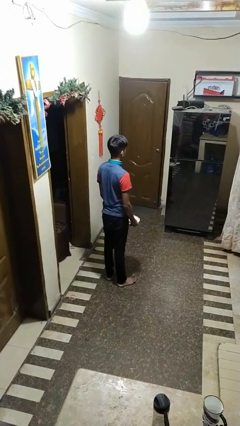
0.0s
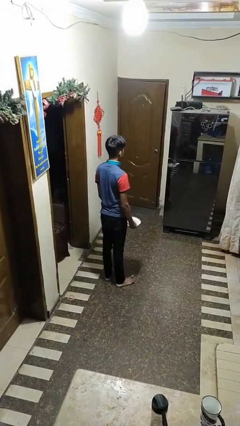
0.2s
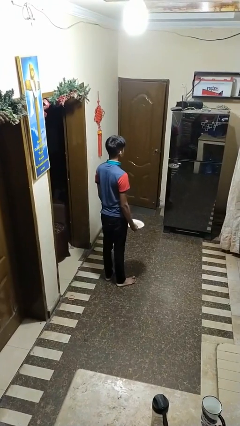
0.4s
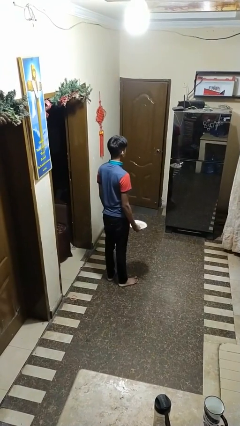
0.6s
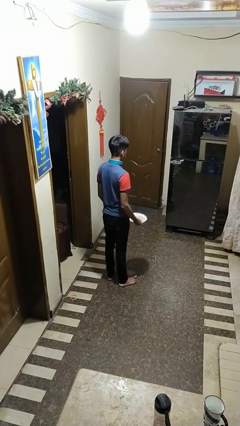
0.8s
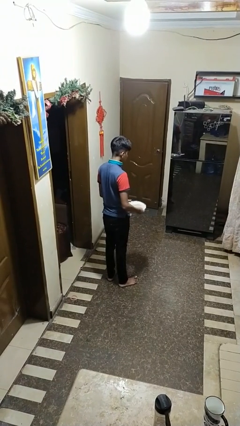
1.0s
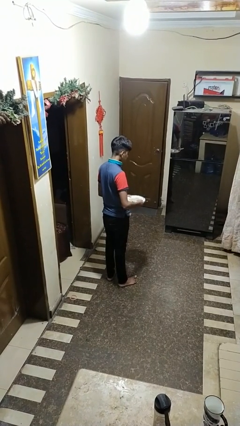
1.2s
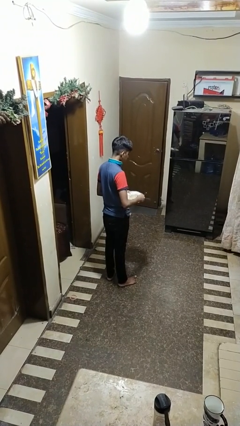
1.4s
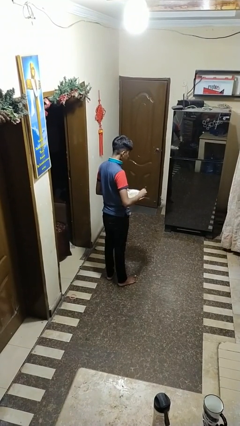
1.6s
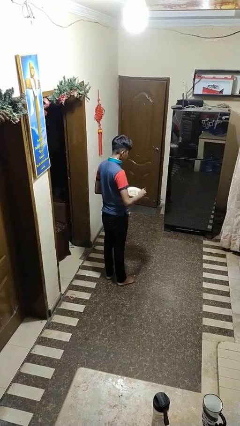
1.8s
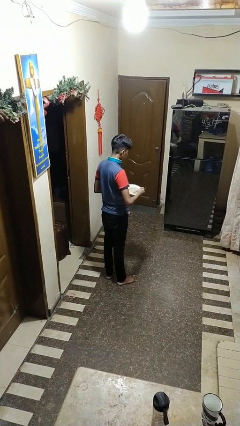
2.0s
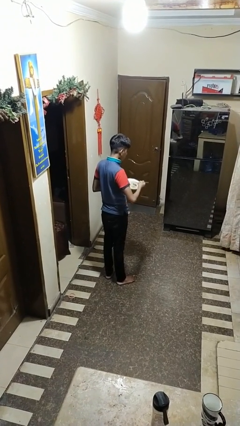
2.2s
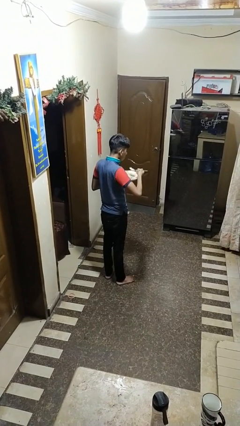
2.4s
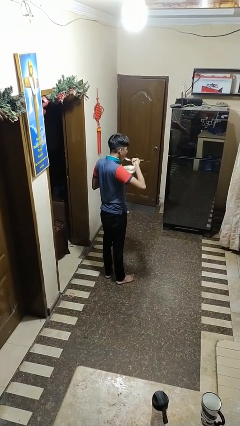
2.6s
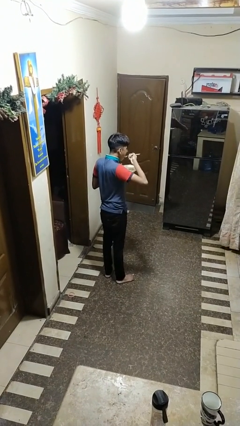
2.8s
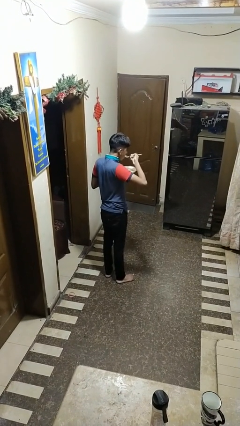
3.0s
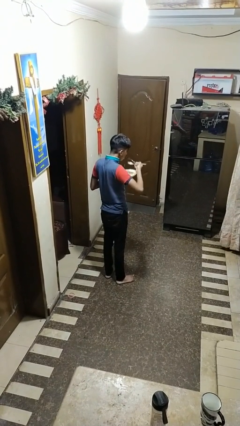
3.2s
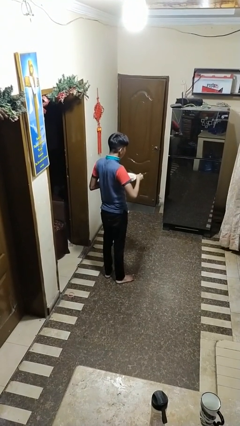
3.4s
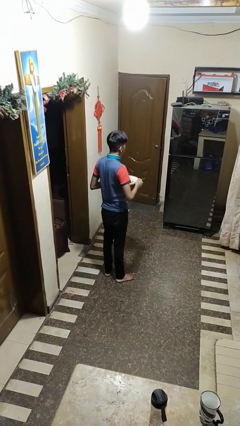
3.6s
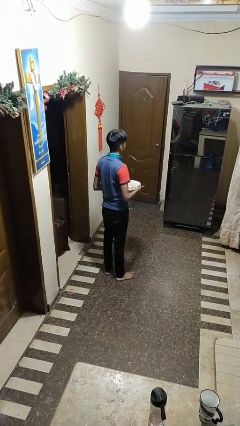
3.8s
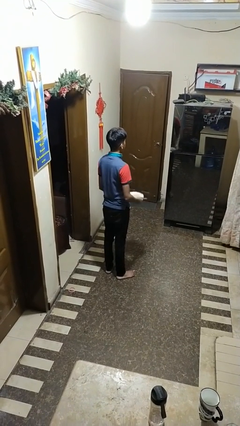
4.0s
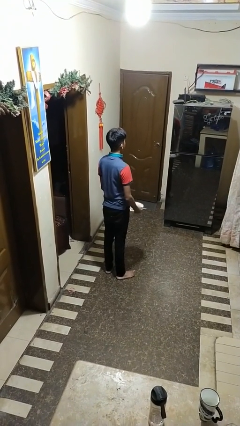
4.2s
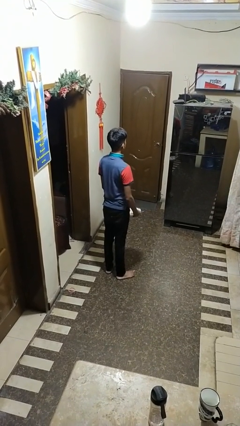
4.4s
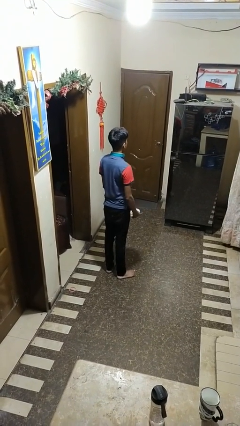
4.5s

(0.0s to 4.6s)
person eats with utensil

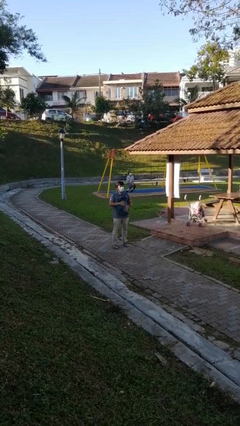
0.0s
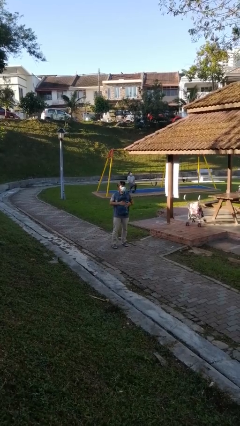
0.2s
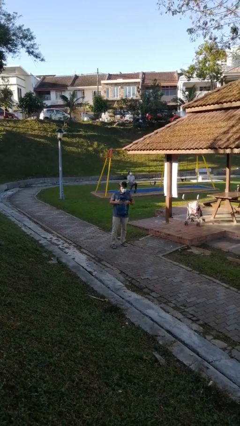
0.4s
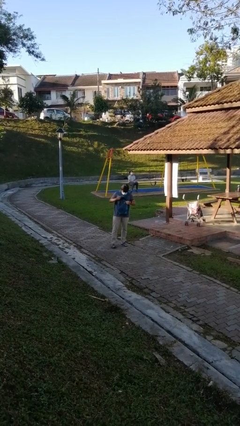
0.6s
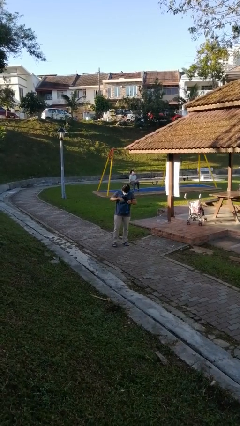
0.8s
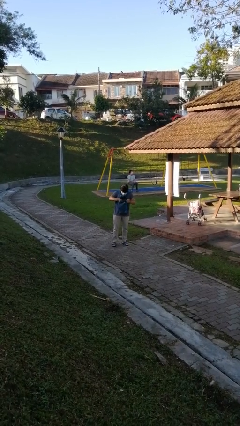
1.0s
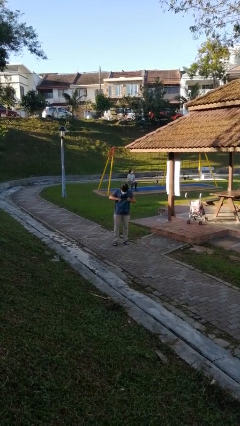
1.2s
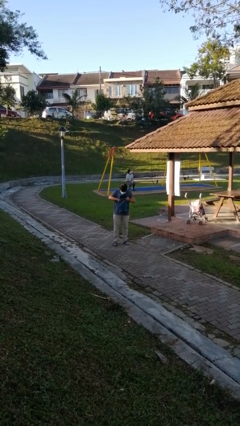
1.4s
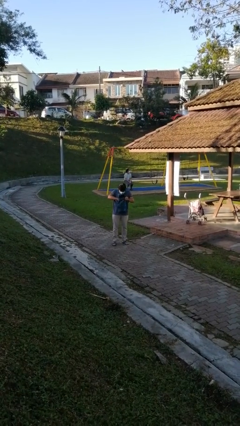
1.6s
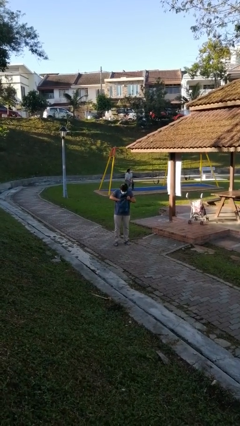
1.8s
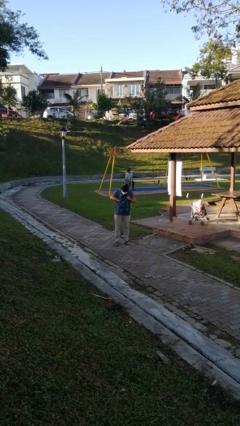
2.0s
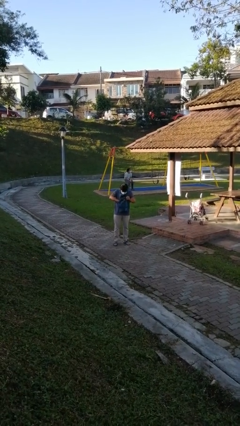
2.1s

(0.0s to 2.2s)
person searches in backpack

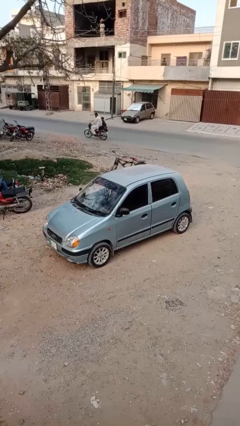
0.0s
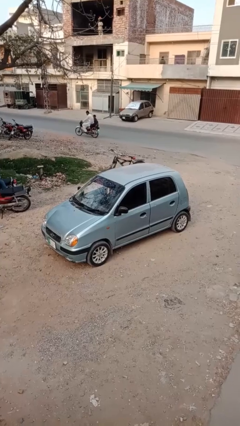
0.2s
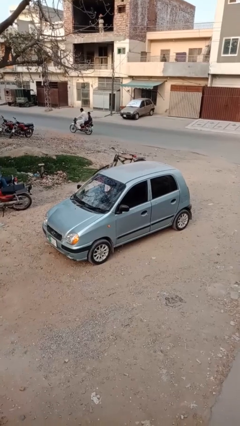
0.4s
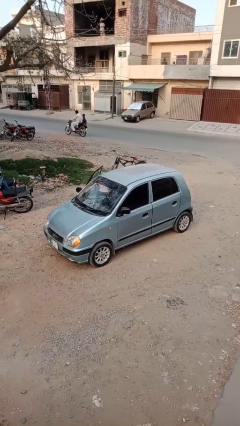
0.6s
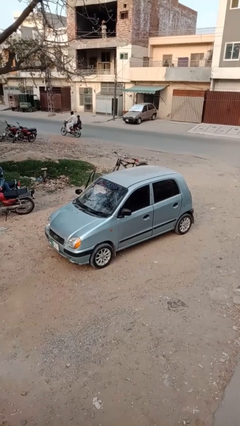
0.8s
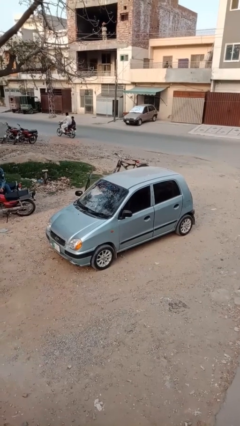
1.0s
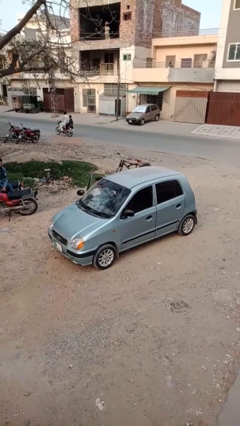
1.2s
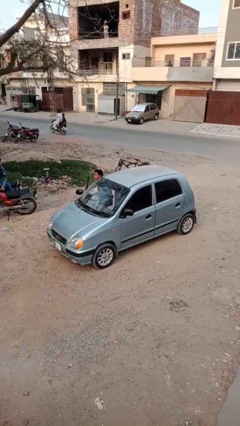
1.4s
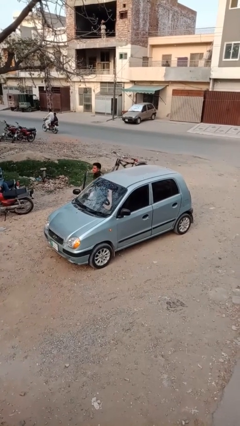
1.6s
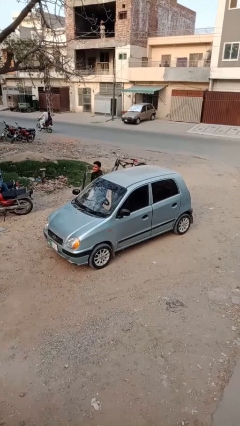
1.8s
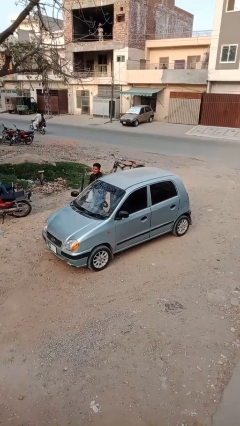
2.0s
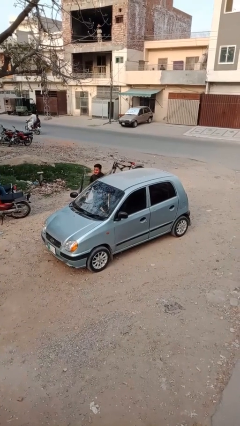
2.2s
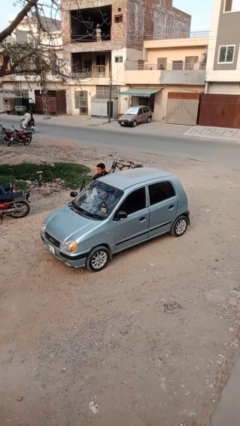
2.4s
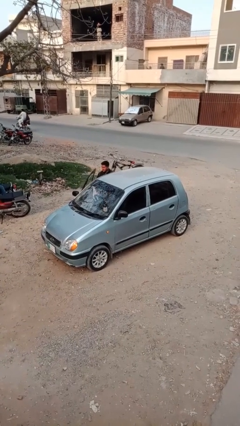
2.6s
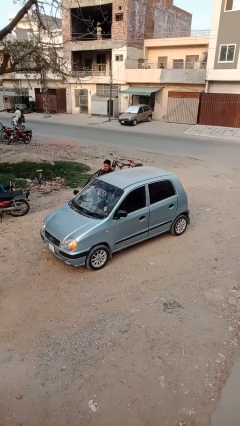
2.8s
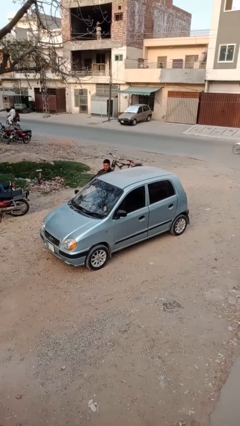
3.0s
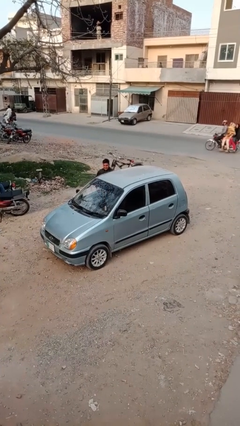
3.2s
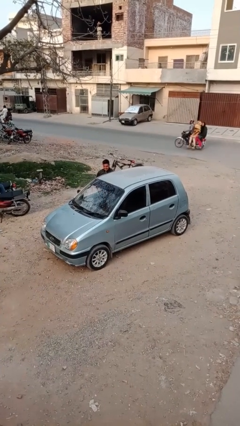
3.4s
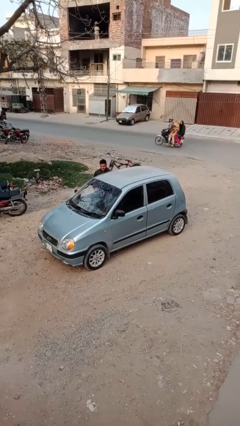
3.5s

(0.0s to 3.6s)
car drops off person

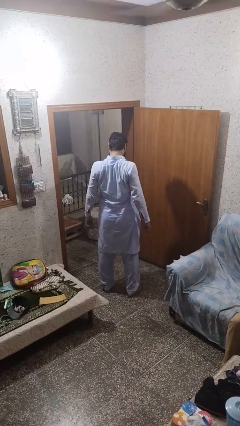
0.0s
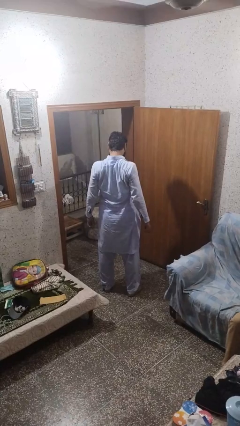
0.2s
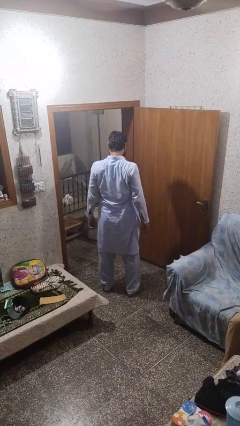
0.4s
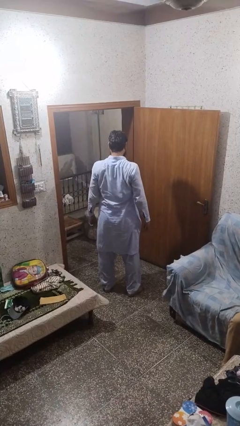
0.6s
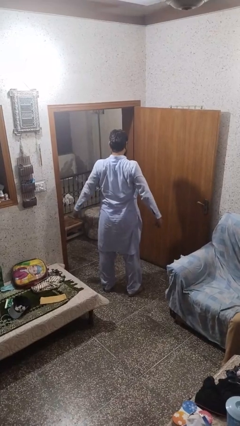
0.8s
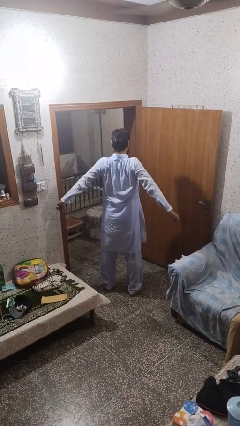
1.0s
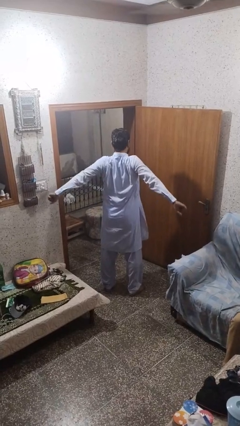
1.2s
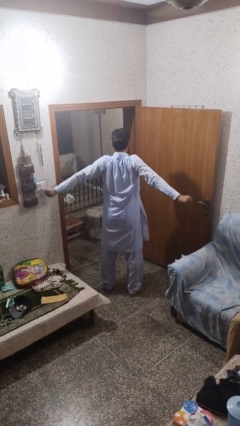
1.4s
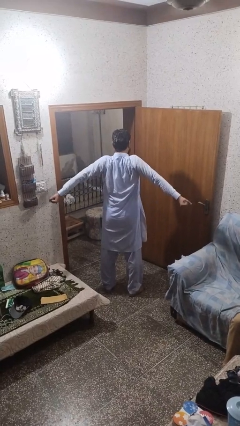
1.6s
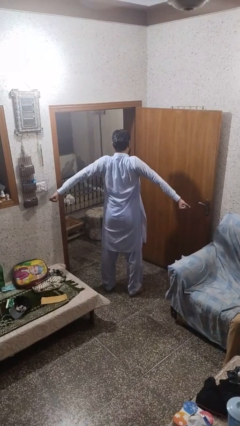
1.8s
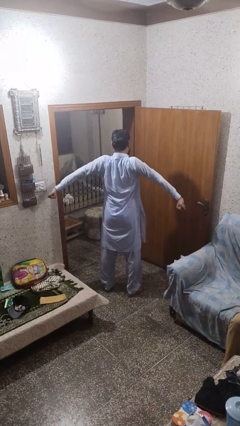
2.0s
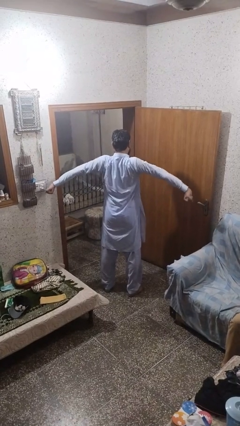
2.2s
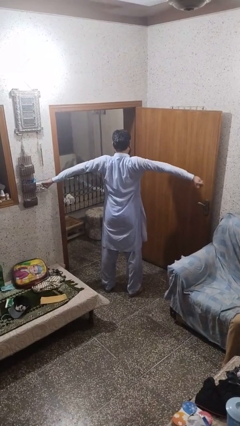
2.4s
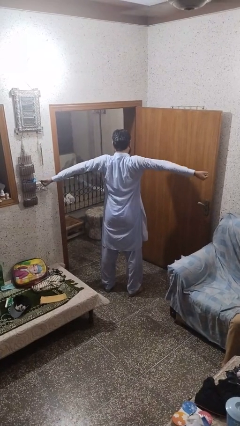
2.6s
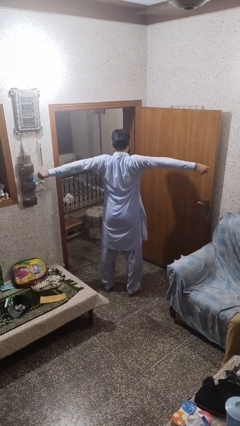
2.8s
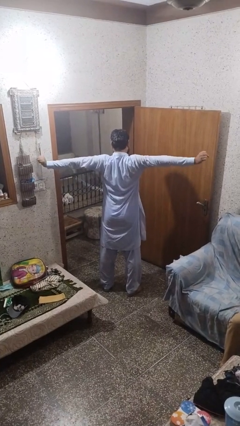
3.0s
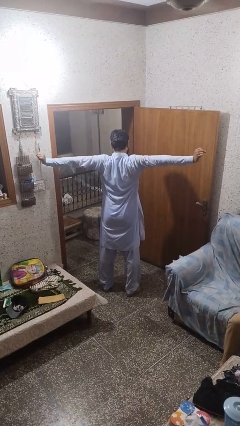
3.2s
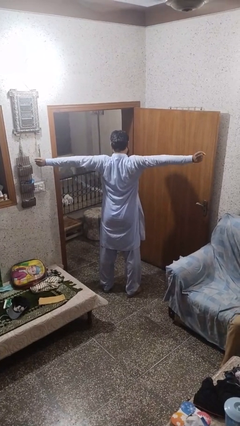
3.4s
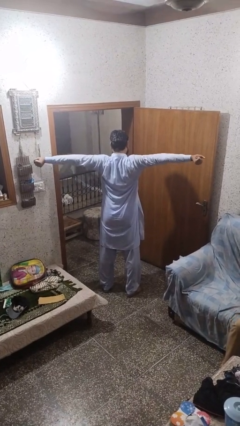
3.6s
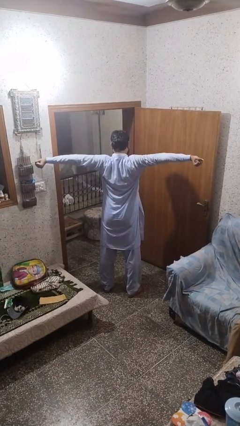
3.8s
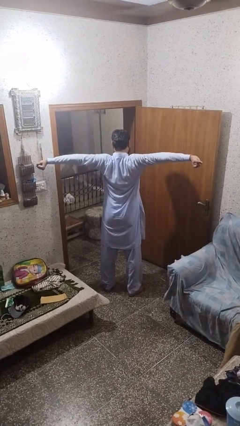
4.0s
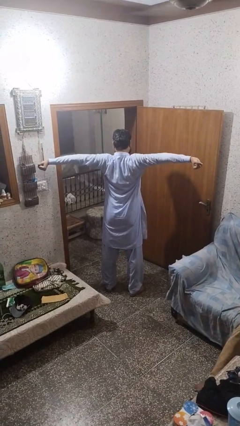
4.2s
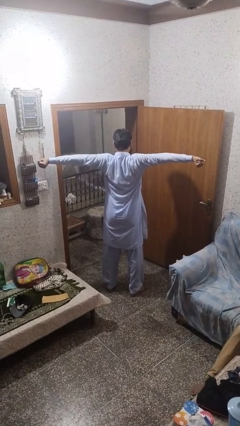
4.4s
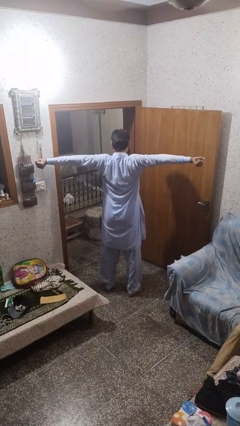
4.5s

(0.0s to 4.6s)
person stretches arms to side

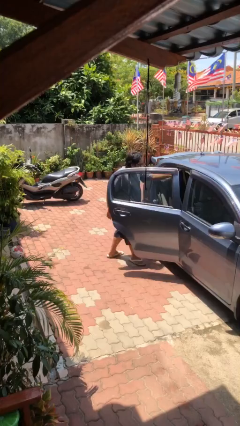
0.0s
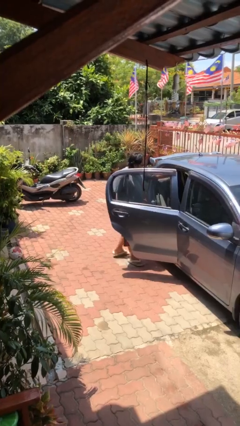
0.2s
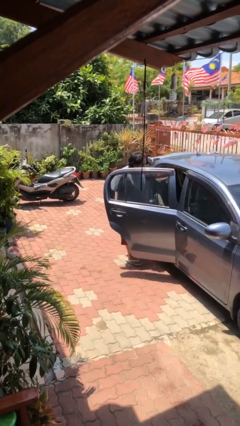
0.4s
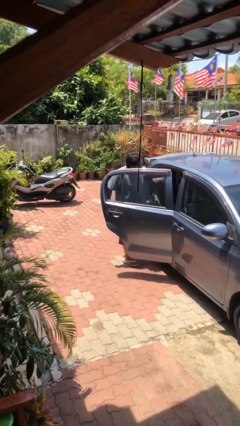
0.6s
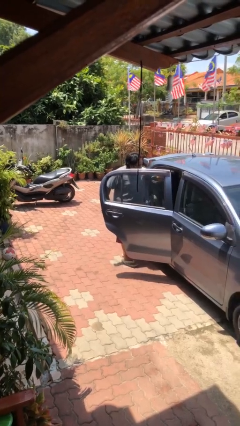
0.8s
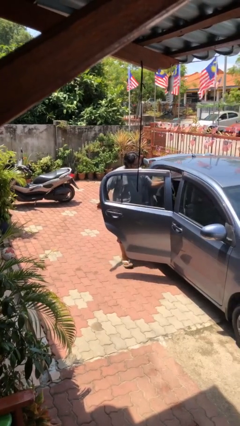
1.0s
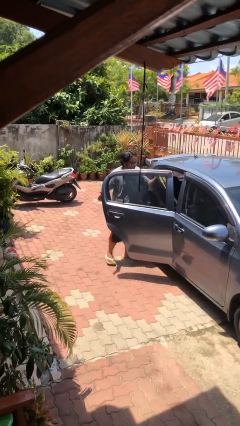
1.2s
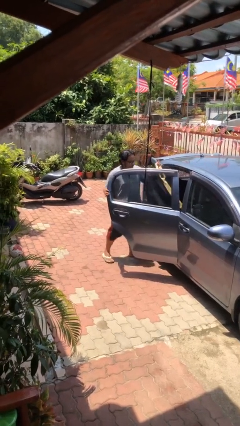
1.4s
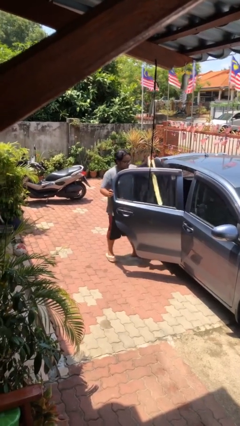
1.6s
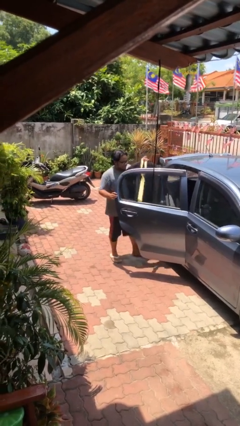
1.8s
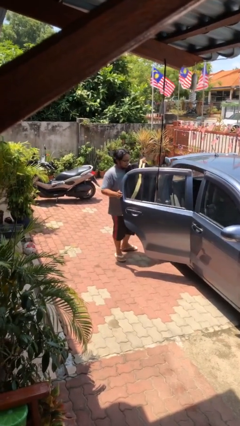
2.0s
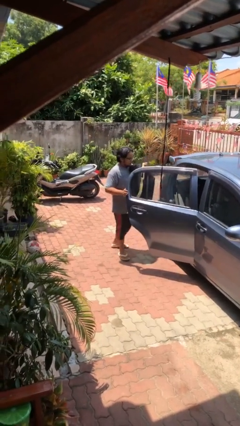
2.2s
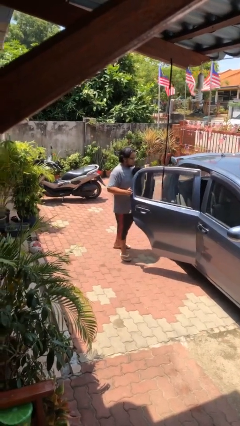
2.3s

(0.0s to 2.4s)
person unloads car

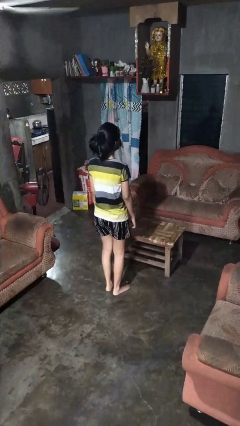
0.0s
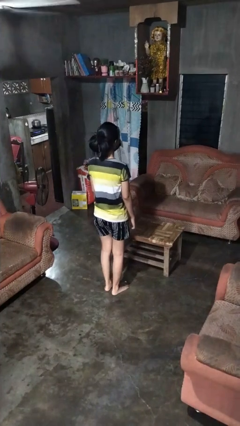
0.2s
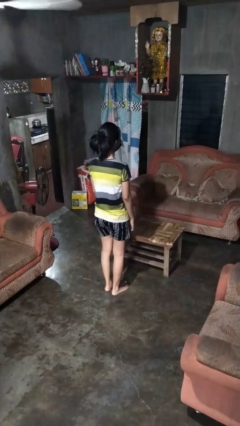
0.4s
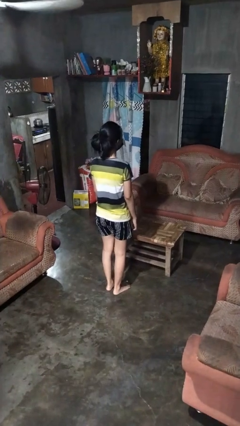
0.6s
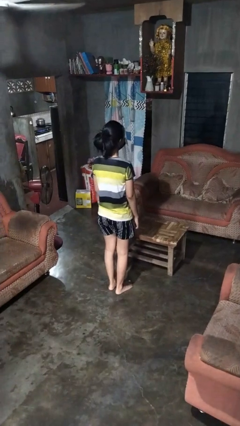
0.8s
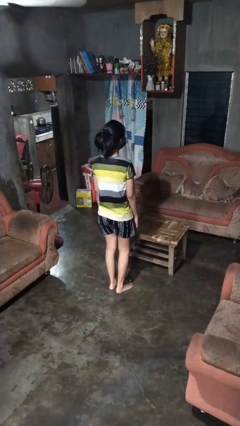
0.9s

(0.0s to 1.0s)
person climbs on table
